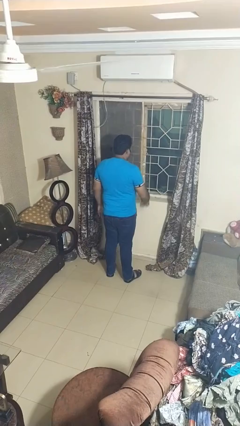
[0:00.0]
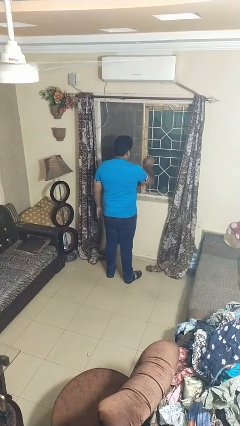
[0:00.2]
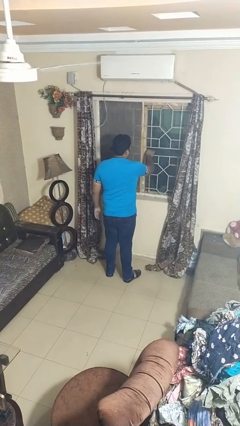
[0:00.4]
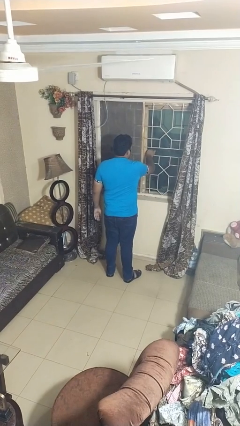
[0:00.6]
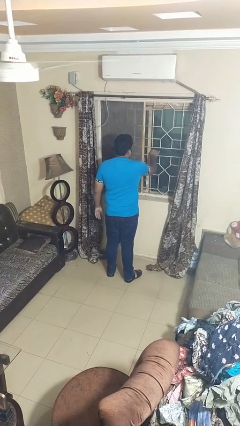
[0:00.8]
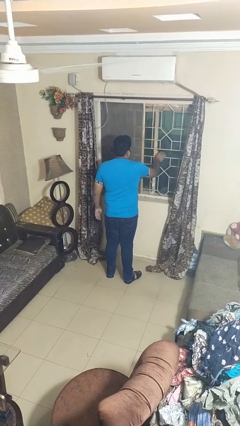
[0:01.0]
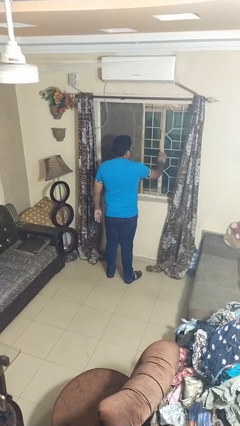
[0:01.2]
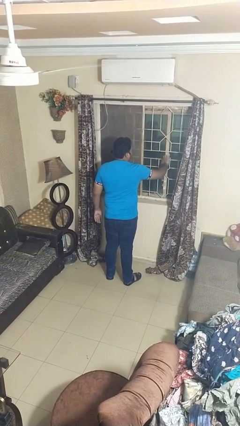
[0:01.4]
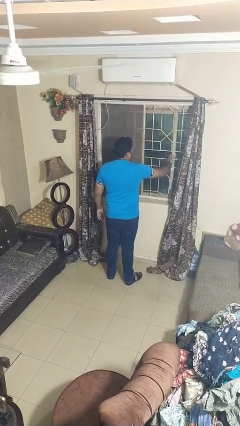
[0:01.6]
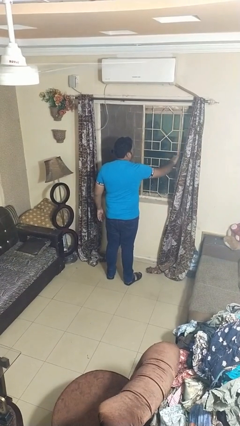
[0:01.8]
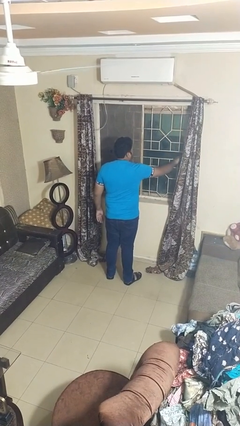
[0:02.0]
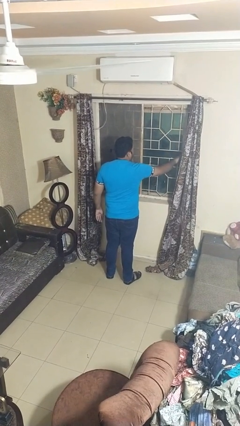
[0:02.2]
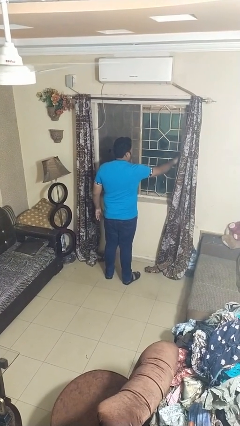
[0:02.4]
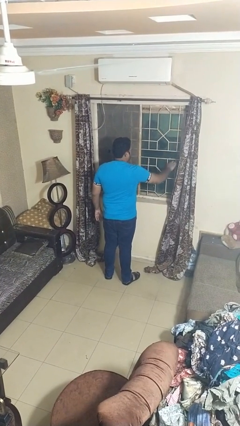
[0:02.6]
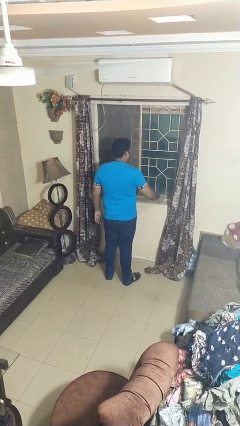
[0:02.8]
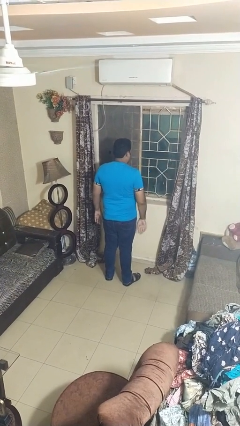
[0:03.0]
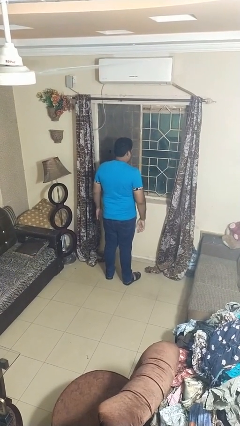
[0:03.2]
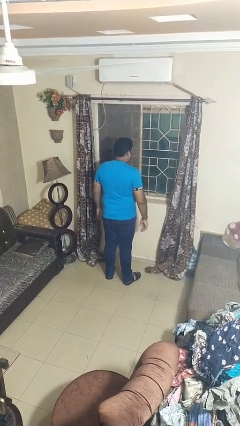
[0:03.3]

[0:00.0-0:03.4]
person opens home window

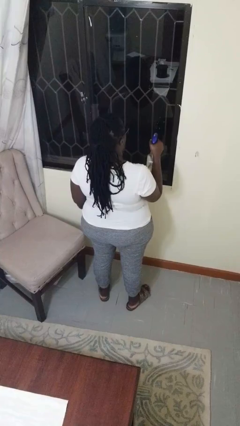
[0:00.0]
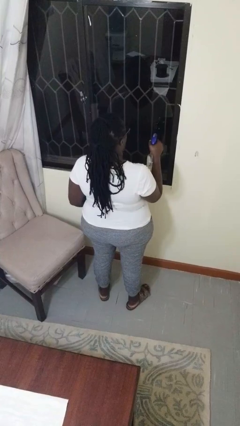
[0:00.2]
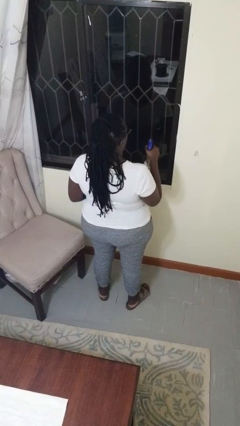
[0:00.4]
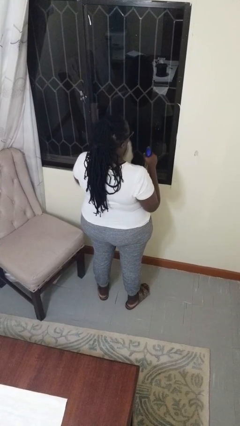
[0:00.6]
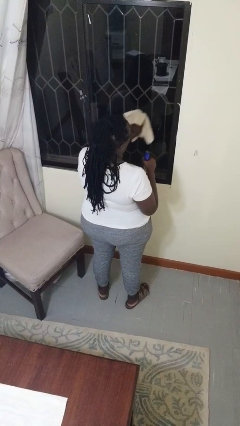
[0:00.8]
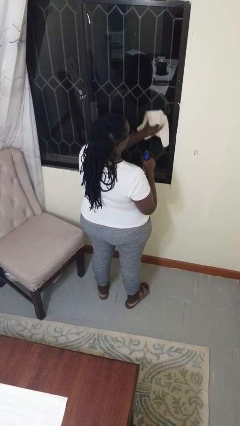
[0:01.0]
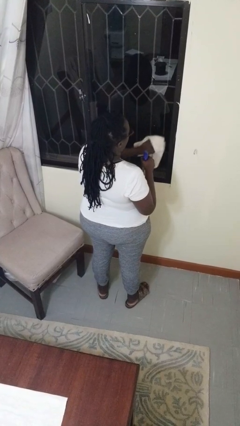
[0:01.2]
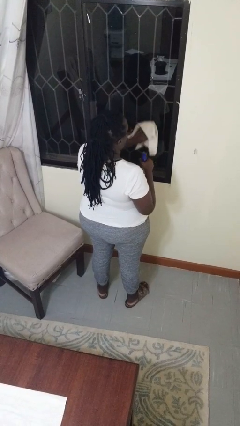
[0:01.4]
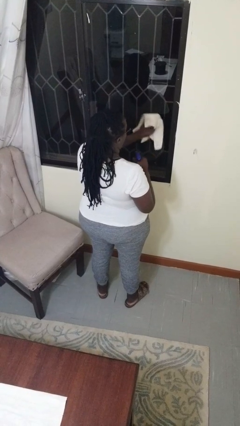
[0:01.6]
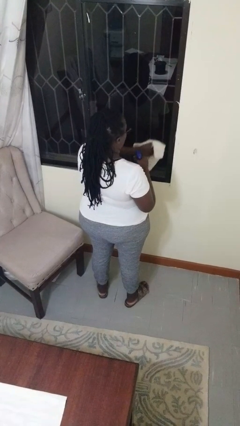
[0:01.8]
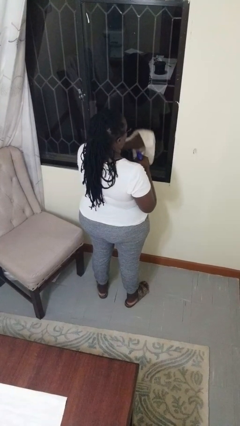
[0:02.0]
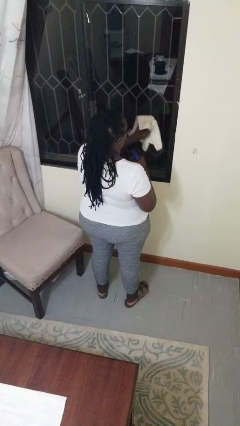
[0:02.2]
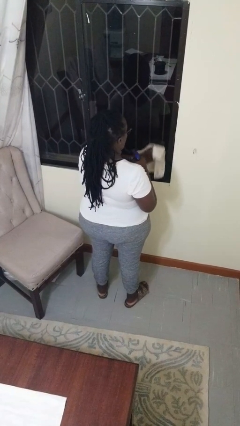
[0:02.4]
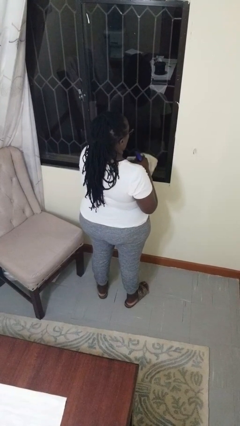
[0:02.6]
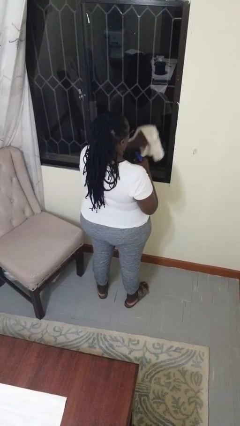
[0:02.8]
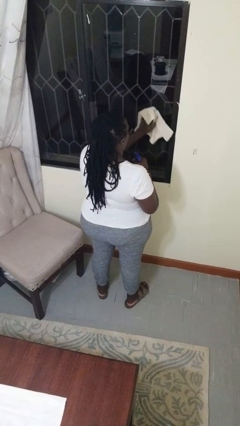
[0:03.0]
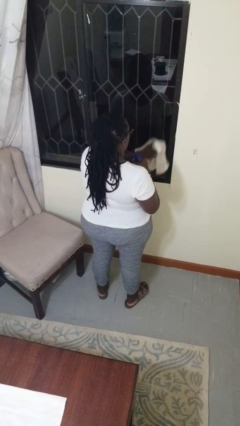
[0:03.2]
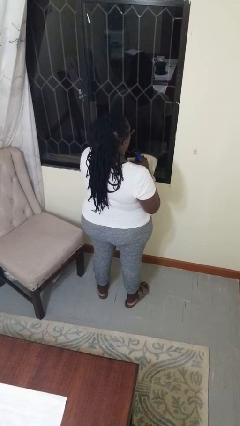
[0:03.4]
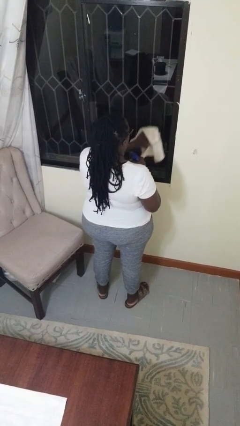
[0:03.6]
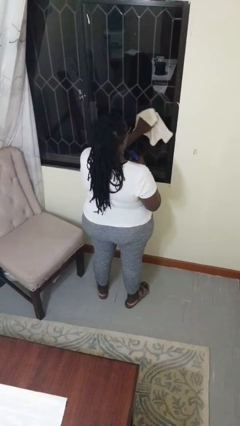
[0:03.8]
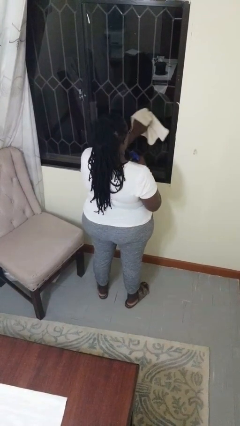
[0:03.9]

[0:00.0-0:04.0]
person washes window

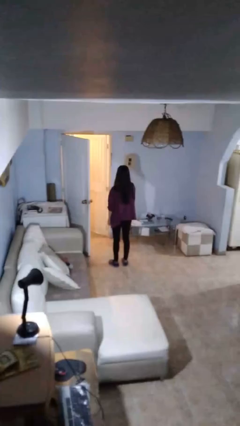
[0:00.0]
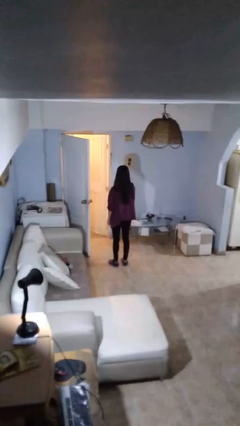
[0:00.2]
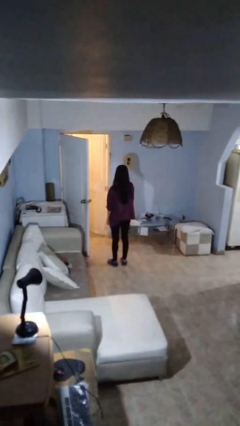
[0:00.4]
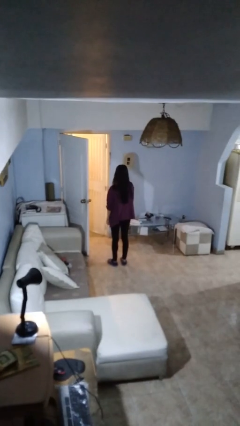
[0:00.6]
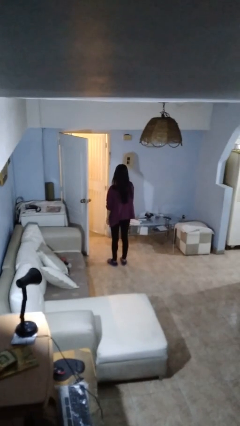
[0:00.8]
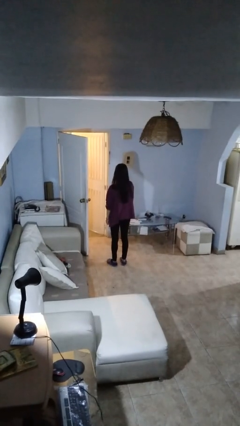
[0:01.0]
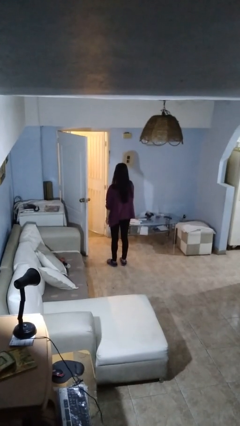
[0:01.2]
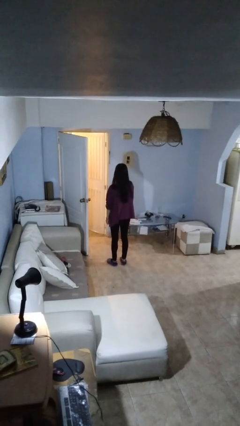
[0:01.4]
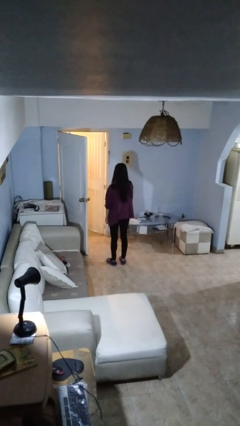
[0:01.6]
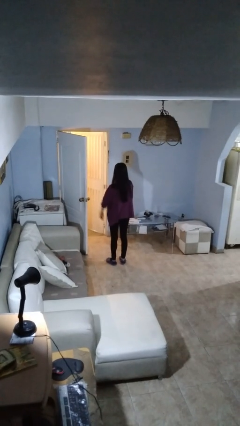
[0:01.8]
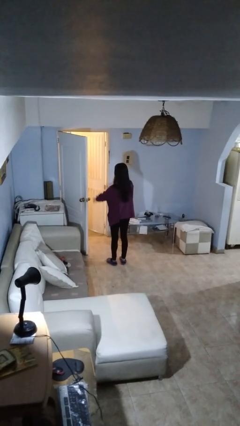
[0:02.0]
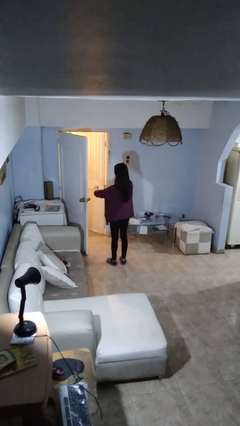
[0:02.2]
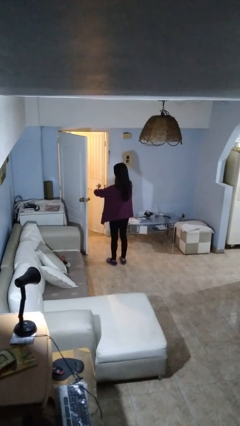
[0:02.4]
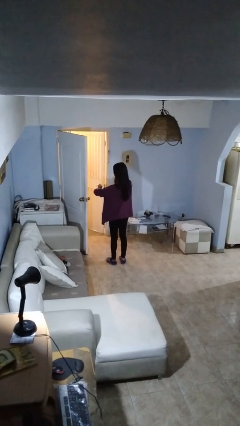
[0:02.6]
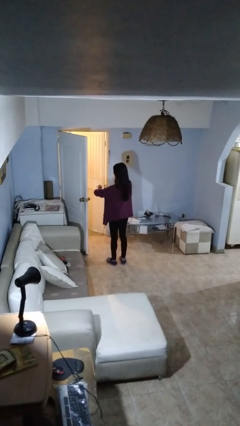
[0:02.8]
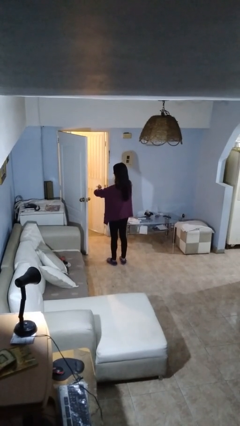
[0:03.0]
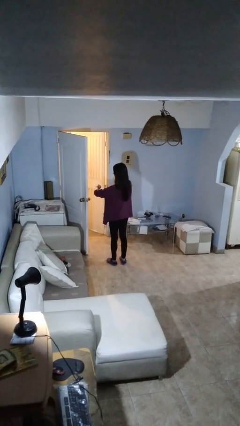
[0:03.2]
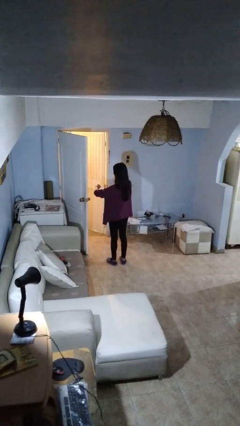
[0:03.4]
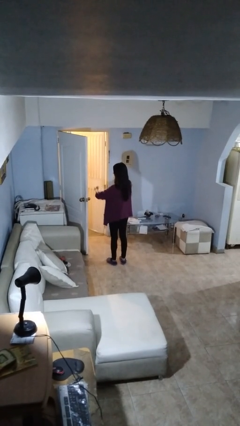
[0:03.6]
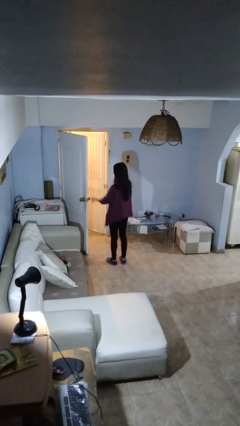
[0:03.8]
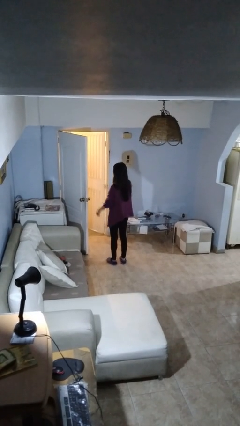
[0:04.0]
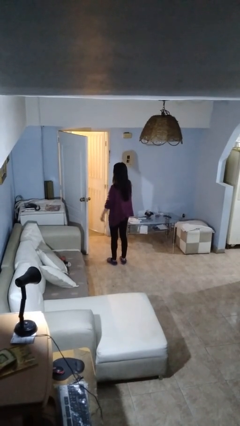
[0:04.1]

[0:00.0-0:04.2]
person looks at wristwatch

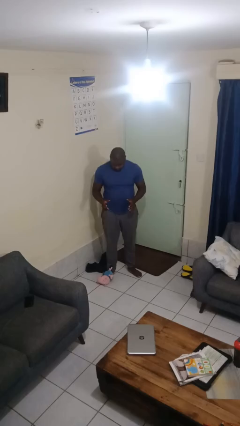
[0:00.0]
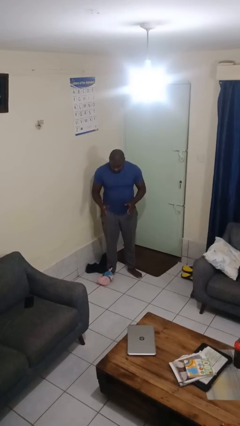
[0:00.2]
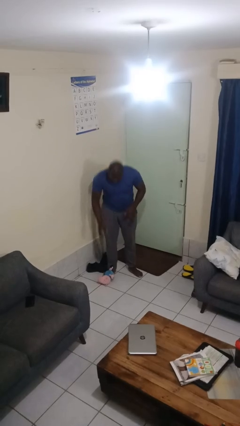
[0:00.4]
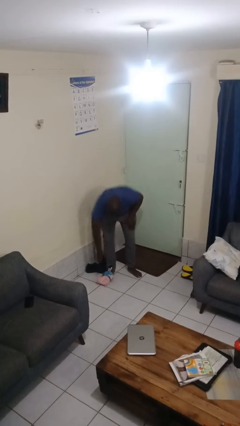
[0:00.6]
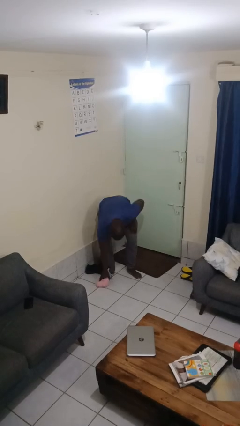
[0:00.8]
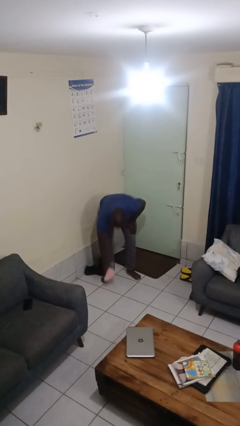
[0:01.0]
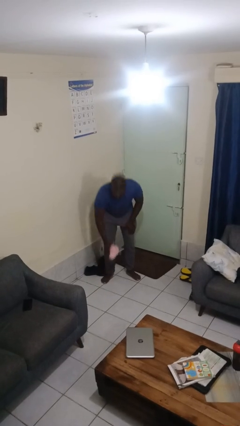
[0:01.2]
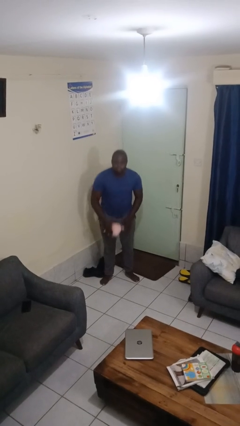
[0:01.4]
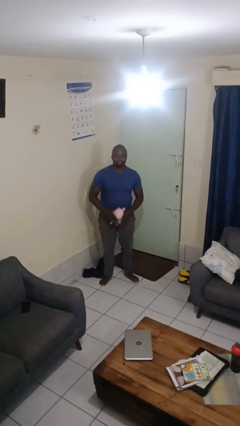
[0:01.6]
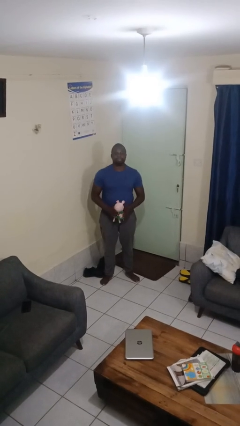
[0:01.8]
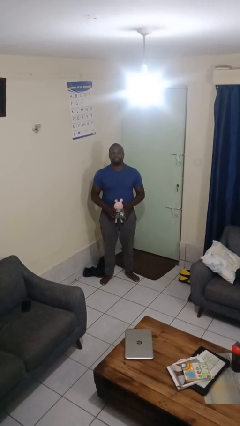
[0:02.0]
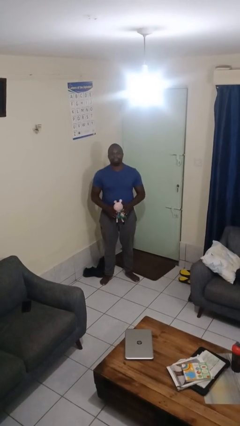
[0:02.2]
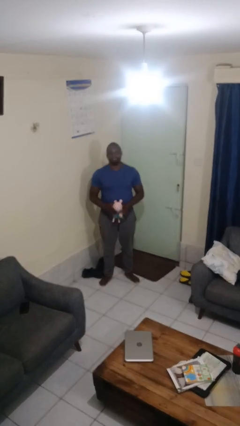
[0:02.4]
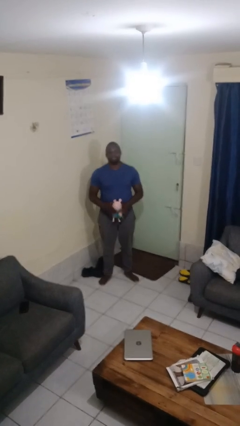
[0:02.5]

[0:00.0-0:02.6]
person picks up object from floor

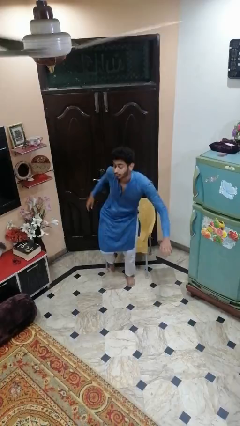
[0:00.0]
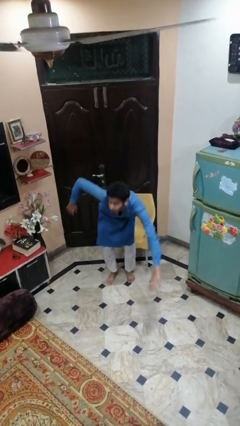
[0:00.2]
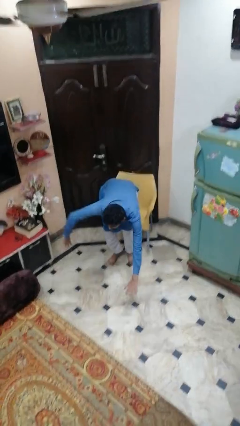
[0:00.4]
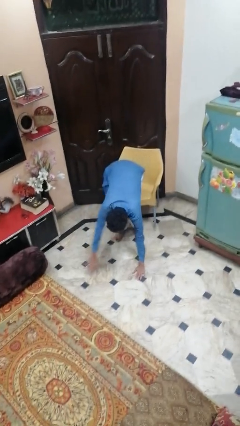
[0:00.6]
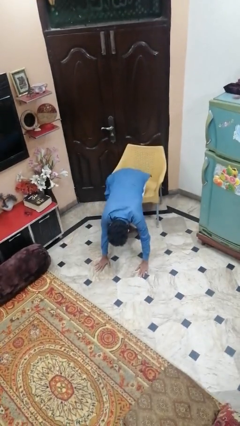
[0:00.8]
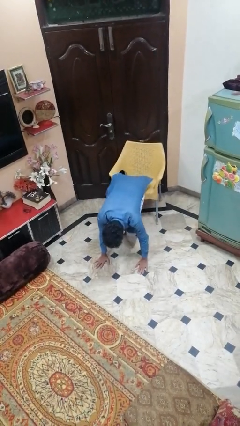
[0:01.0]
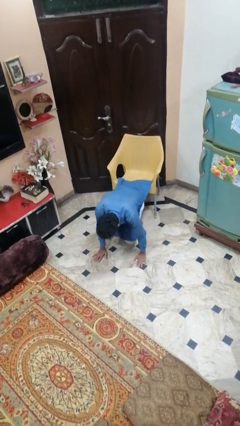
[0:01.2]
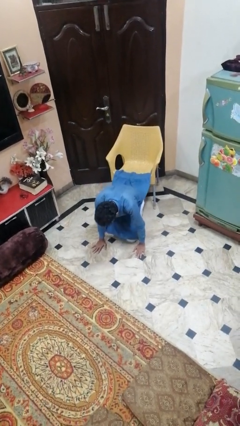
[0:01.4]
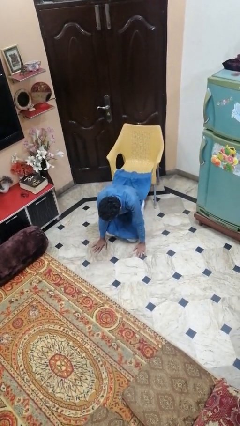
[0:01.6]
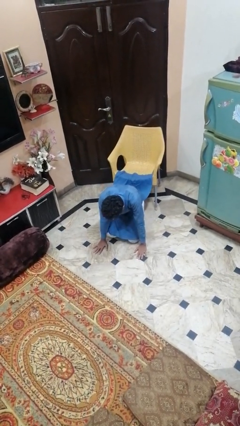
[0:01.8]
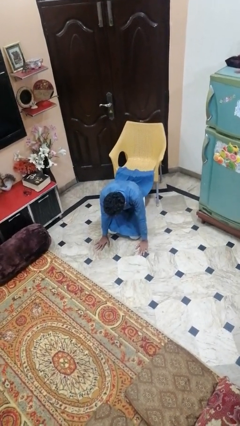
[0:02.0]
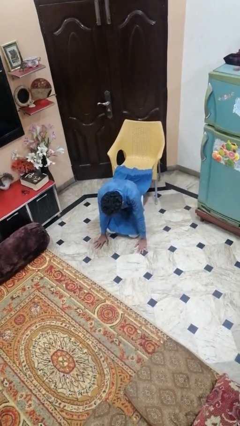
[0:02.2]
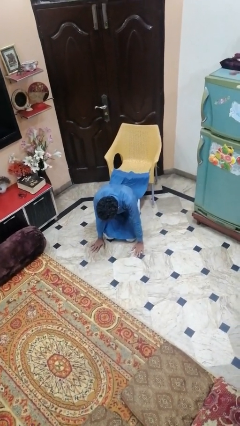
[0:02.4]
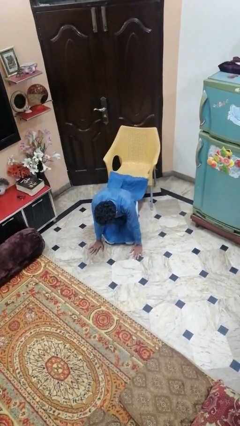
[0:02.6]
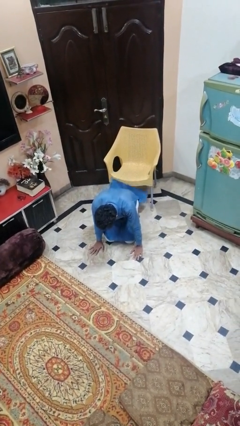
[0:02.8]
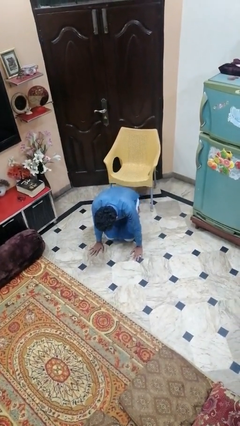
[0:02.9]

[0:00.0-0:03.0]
person falls from chair

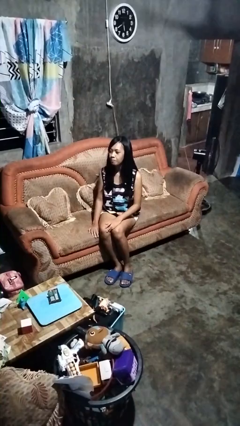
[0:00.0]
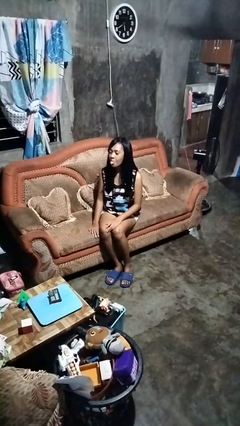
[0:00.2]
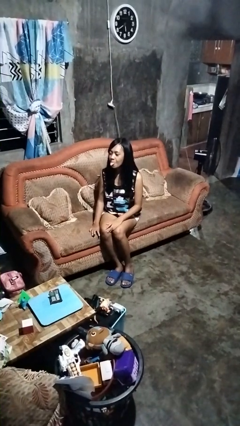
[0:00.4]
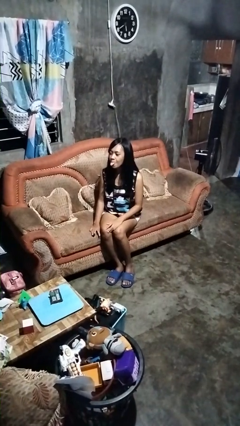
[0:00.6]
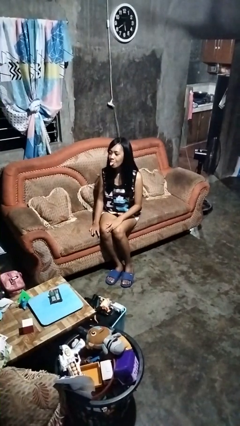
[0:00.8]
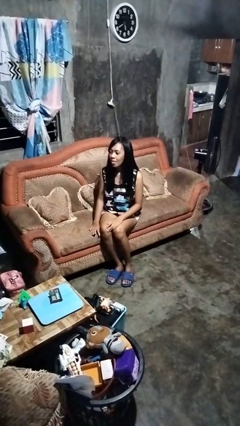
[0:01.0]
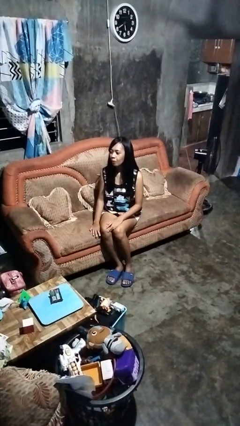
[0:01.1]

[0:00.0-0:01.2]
person sticks out tongue
